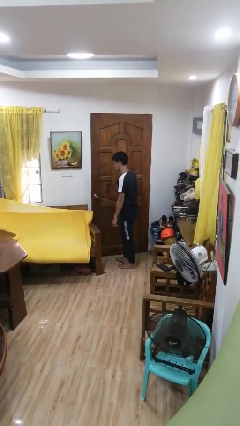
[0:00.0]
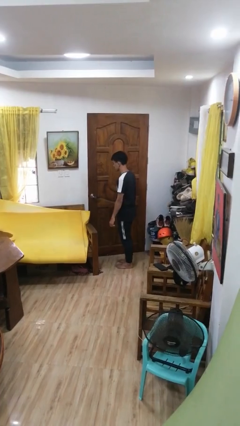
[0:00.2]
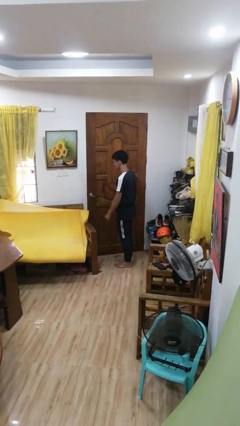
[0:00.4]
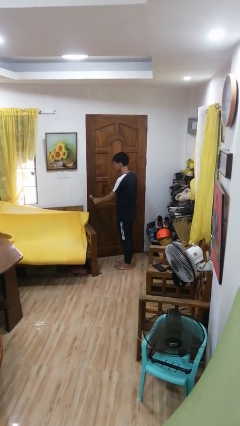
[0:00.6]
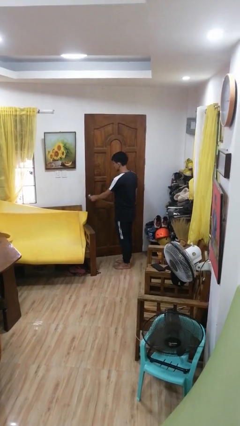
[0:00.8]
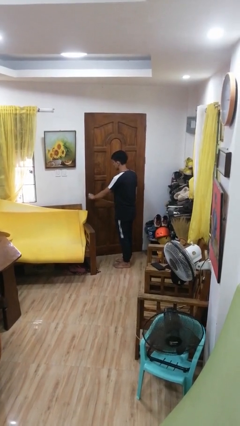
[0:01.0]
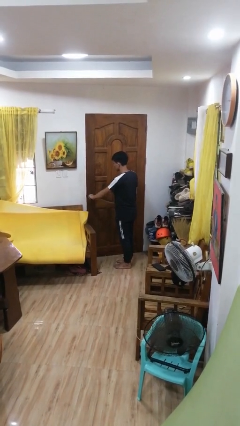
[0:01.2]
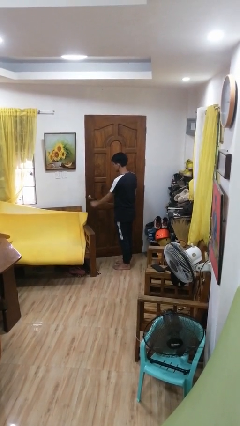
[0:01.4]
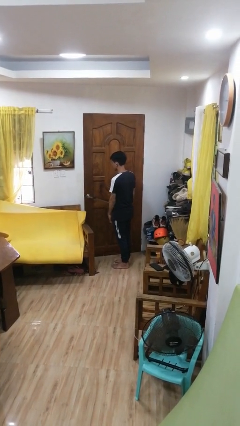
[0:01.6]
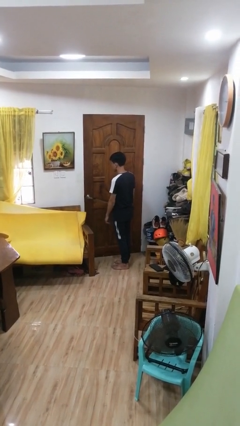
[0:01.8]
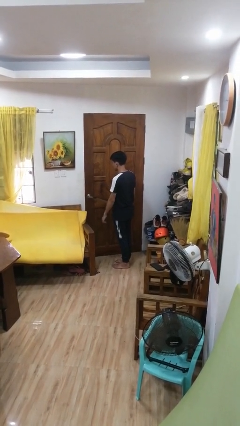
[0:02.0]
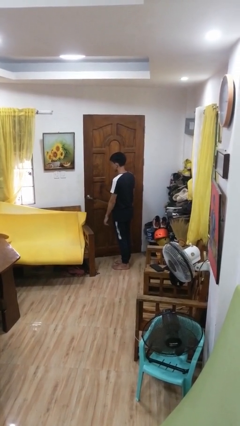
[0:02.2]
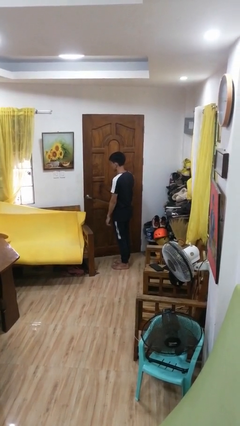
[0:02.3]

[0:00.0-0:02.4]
person unlocks door with keys

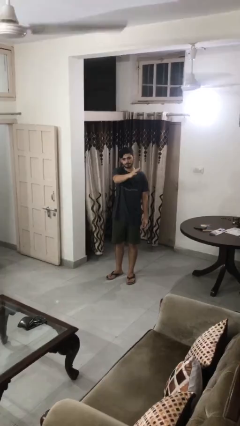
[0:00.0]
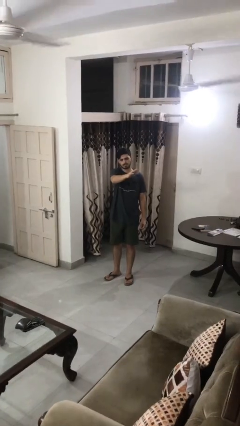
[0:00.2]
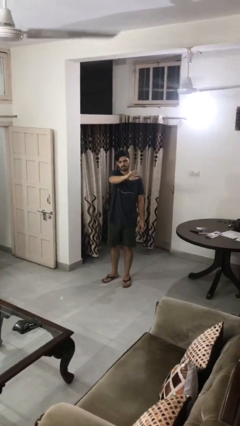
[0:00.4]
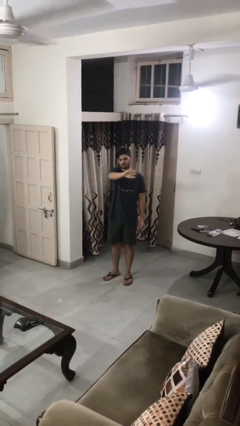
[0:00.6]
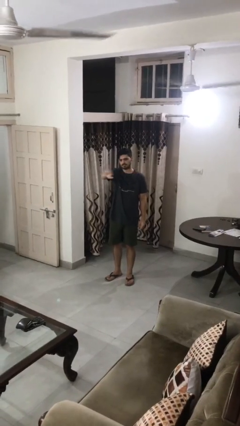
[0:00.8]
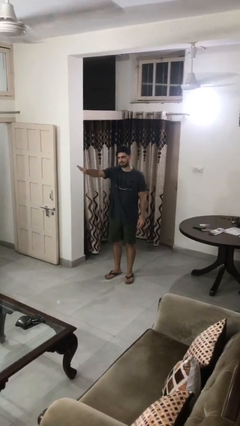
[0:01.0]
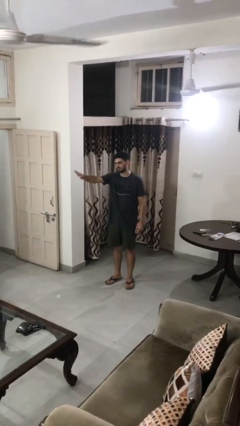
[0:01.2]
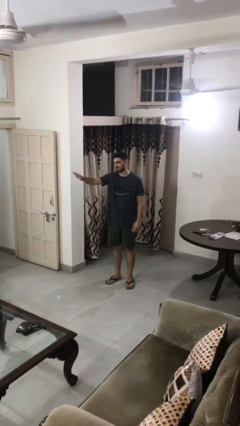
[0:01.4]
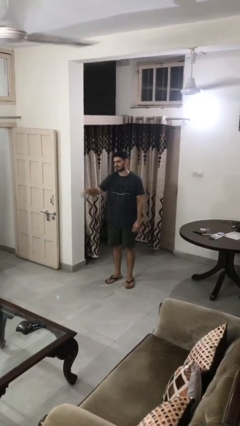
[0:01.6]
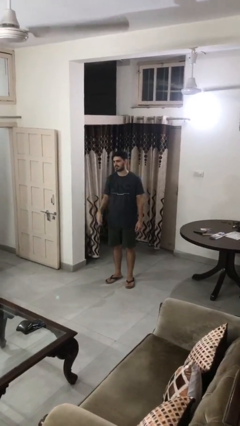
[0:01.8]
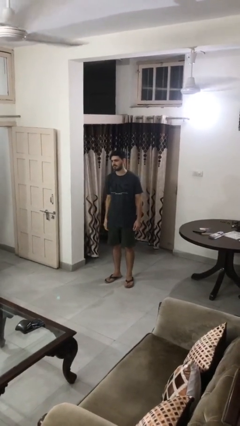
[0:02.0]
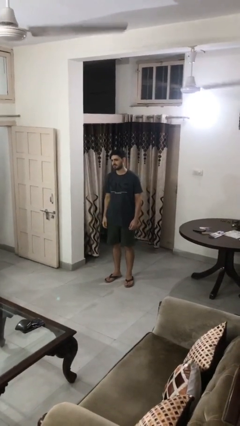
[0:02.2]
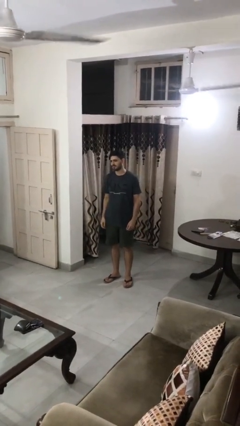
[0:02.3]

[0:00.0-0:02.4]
person gestures swipe right

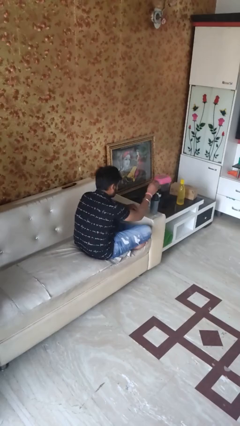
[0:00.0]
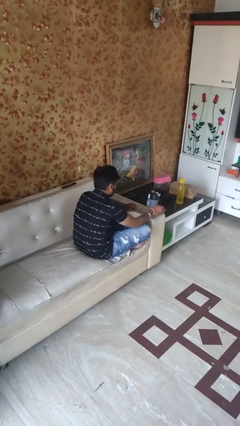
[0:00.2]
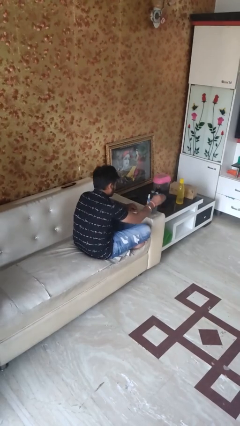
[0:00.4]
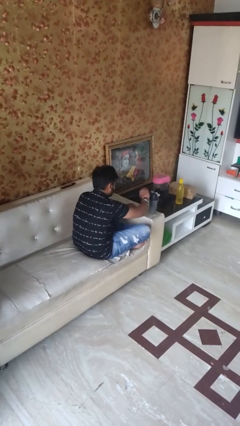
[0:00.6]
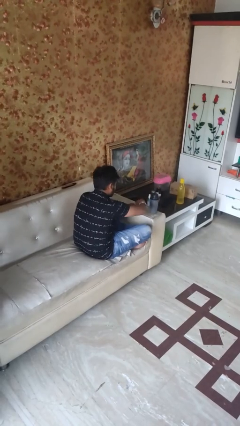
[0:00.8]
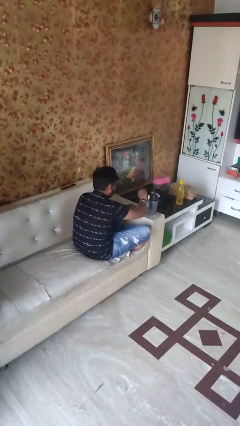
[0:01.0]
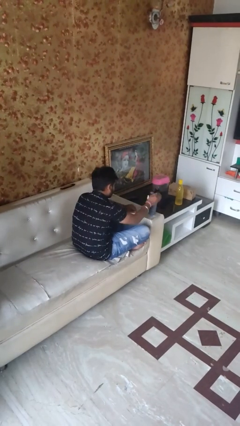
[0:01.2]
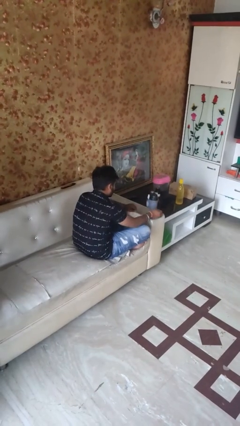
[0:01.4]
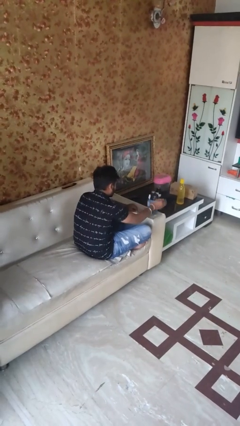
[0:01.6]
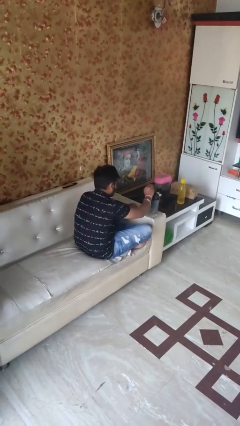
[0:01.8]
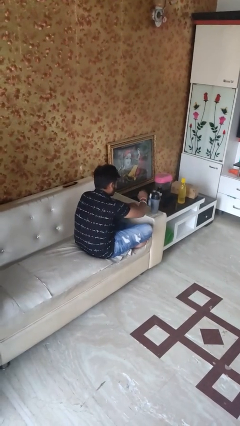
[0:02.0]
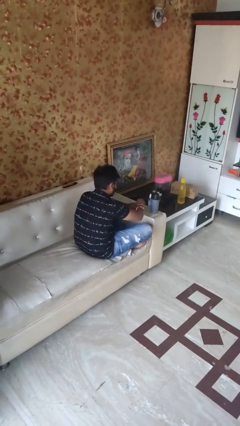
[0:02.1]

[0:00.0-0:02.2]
person waves hand over object

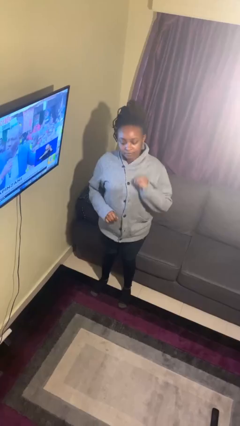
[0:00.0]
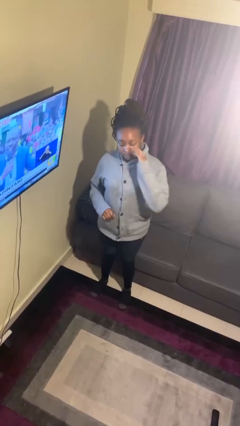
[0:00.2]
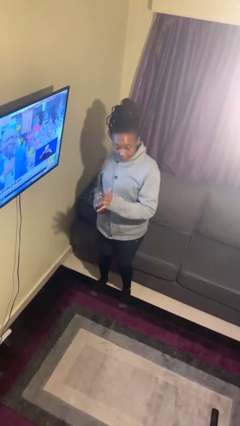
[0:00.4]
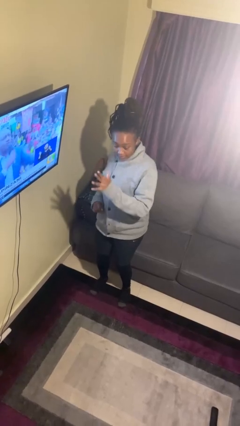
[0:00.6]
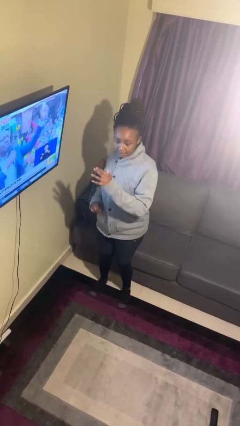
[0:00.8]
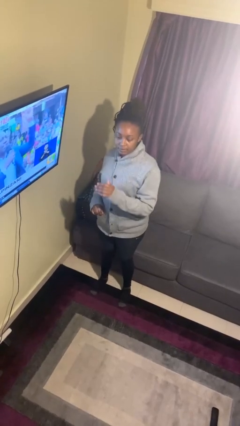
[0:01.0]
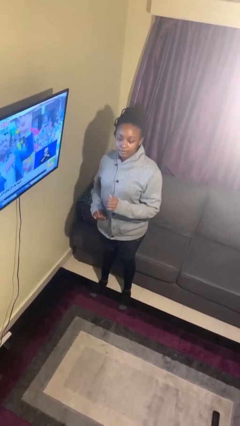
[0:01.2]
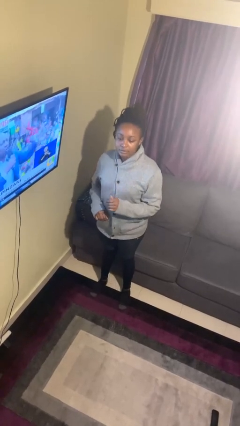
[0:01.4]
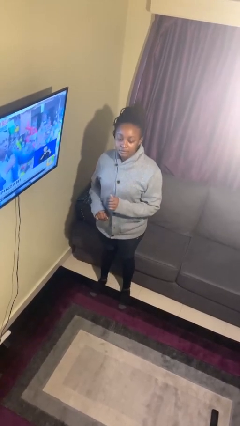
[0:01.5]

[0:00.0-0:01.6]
person karate chop

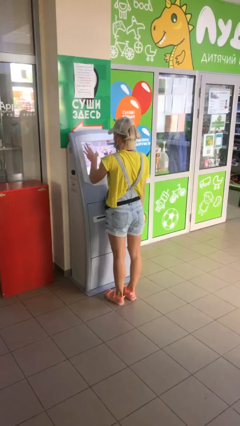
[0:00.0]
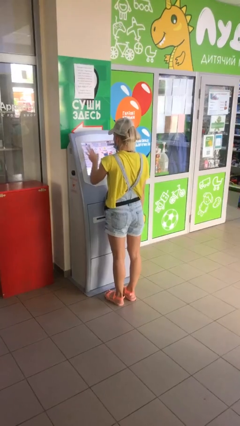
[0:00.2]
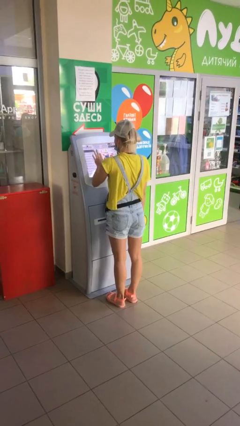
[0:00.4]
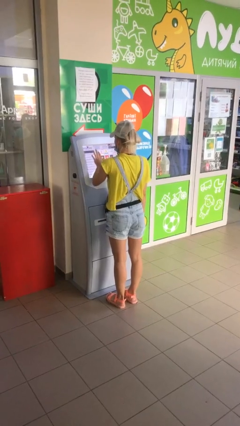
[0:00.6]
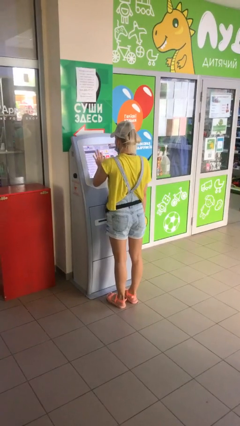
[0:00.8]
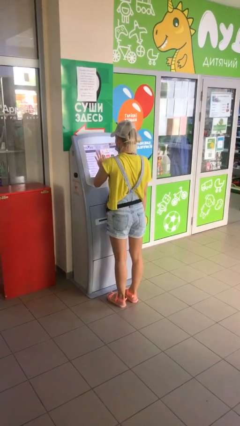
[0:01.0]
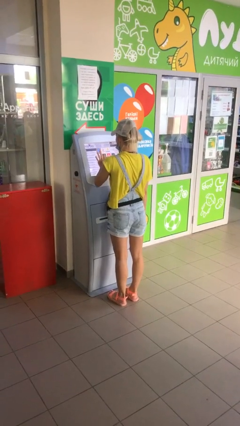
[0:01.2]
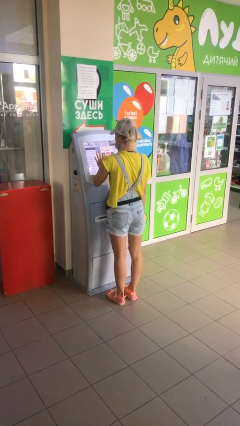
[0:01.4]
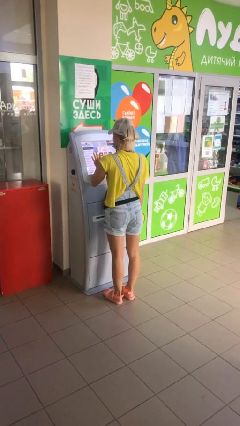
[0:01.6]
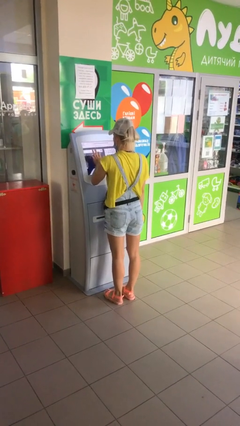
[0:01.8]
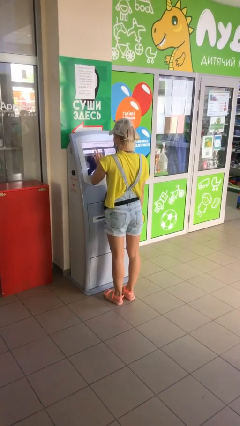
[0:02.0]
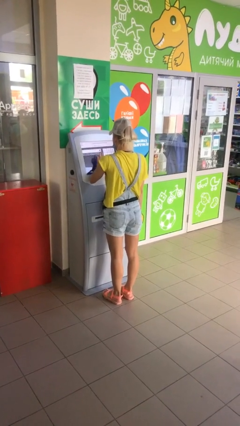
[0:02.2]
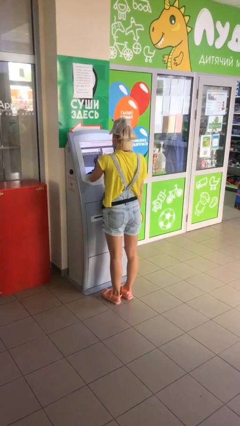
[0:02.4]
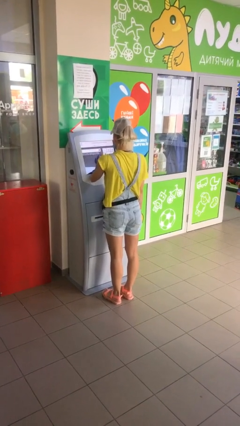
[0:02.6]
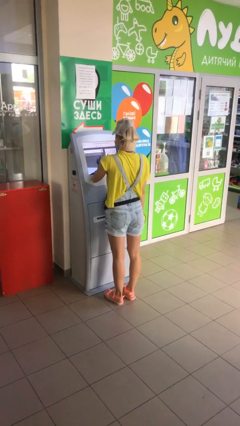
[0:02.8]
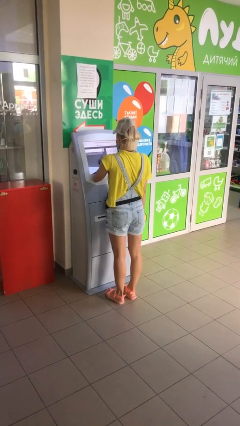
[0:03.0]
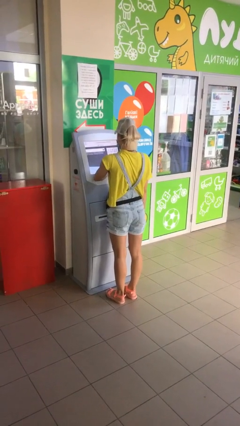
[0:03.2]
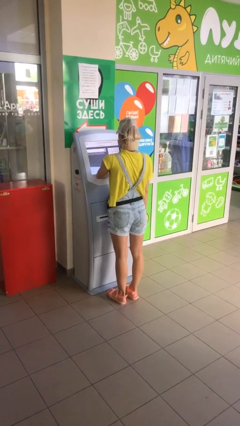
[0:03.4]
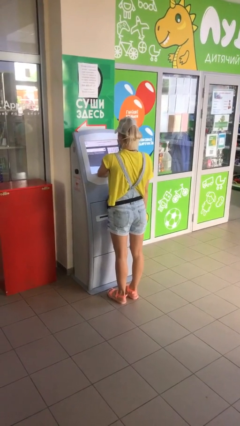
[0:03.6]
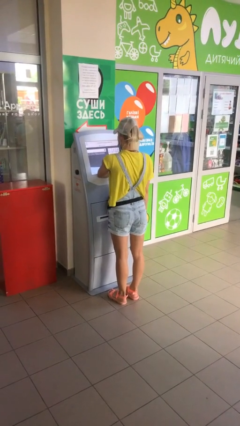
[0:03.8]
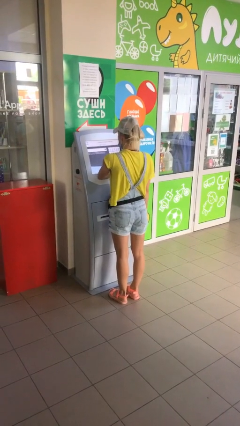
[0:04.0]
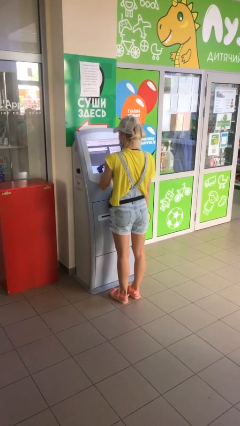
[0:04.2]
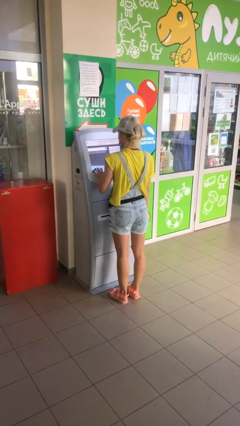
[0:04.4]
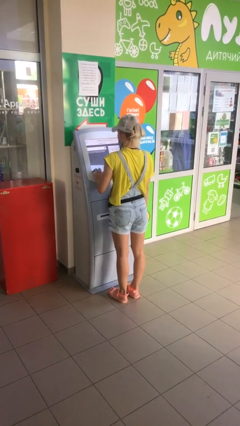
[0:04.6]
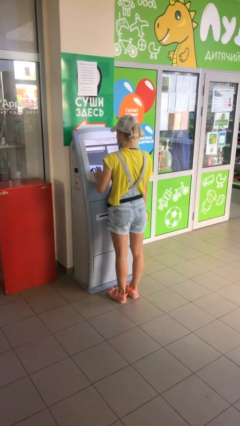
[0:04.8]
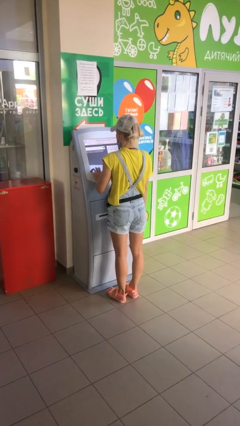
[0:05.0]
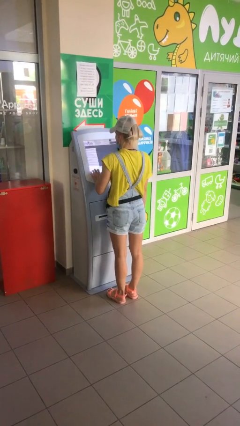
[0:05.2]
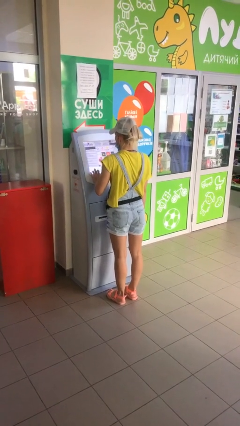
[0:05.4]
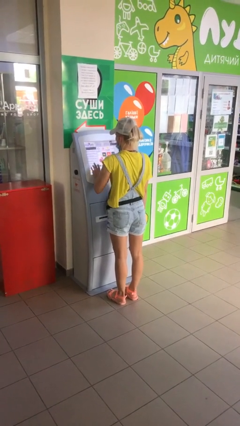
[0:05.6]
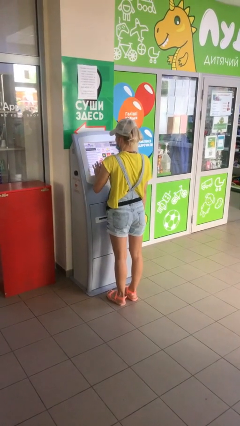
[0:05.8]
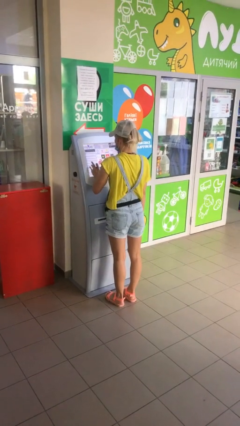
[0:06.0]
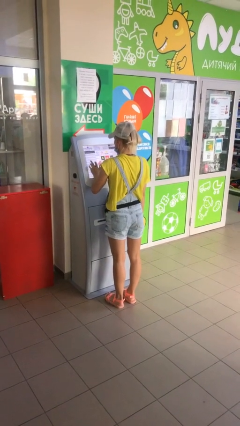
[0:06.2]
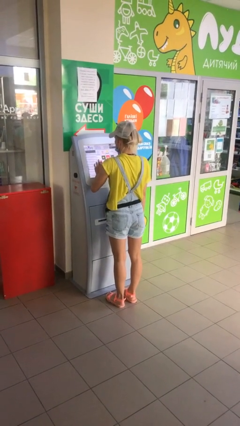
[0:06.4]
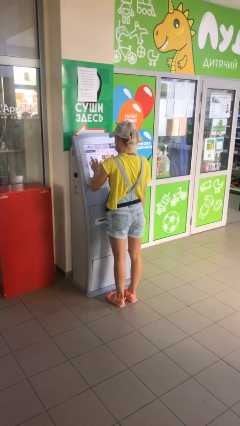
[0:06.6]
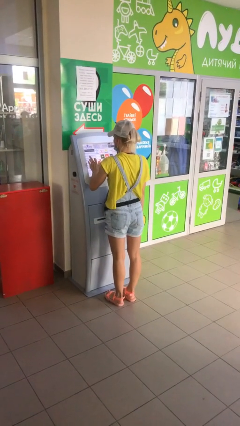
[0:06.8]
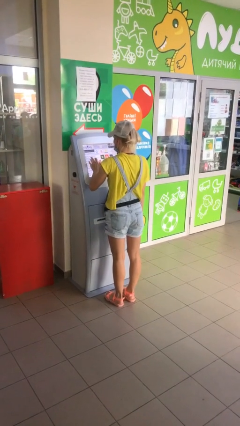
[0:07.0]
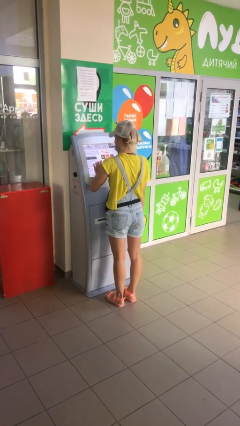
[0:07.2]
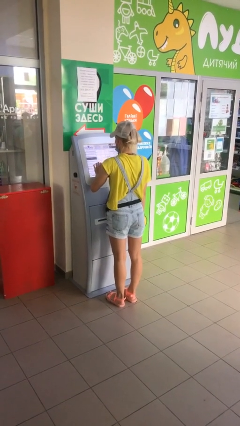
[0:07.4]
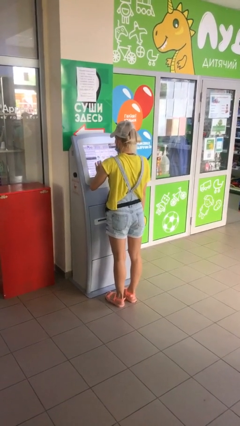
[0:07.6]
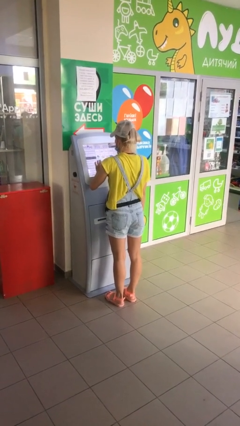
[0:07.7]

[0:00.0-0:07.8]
person purchases from machine

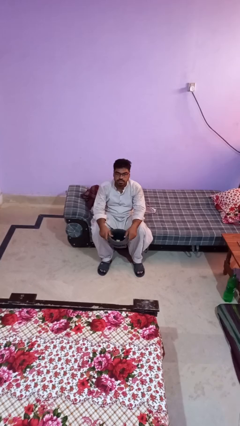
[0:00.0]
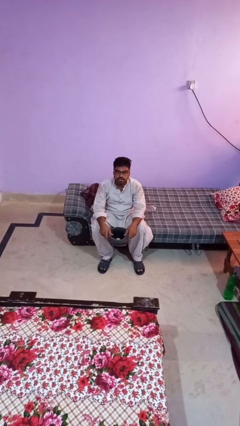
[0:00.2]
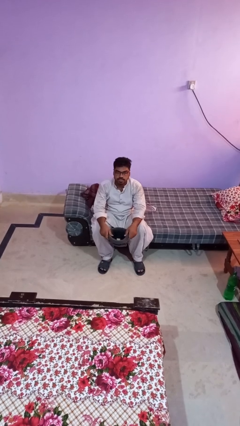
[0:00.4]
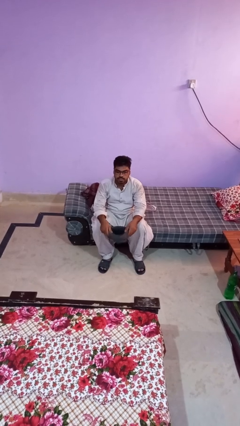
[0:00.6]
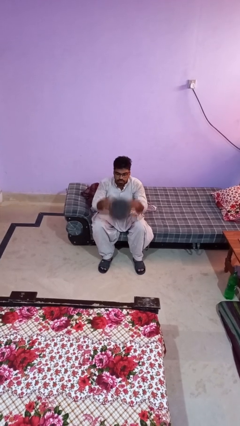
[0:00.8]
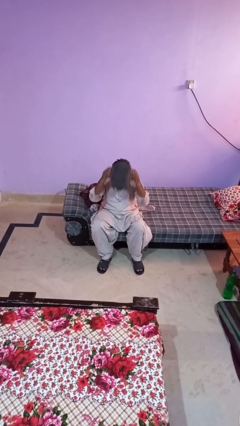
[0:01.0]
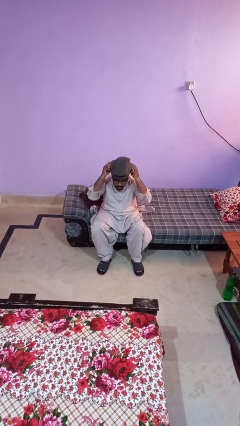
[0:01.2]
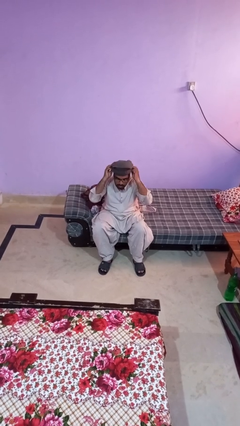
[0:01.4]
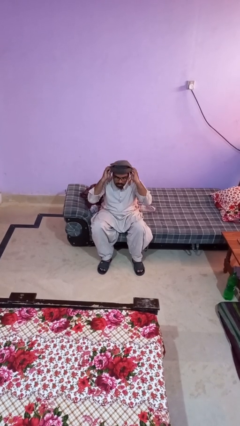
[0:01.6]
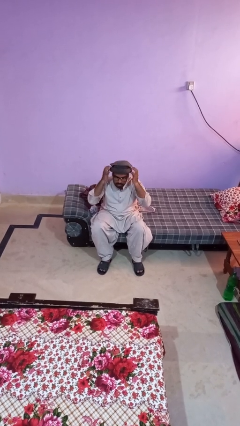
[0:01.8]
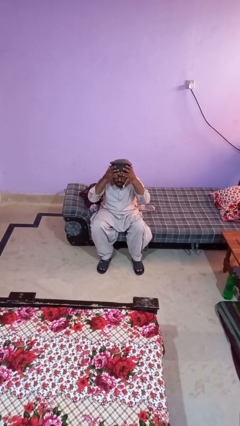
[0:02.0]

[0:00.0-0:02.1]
person puts on hat
